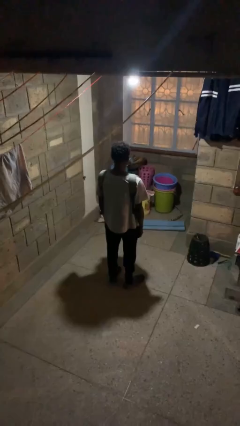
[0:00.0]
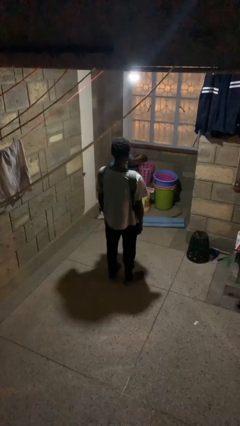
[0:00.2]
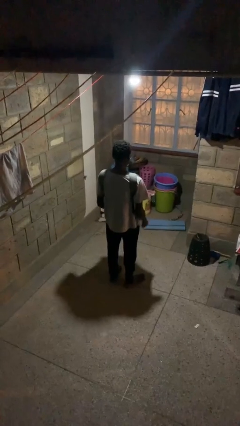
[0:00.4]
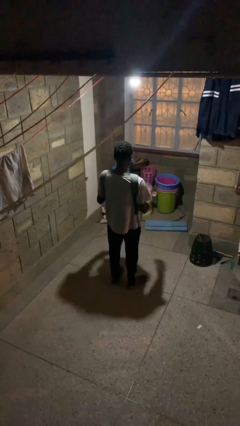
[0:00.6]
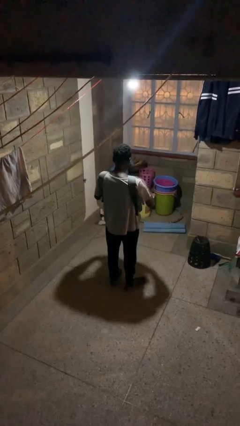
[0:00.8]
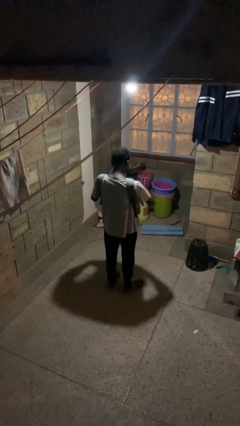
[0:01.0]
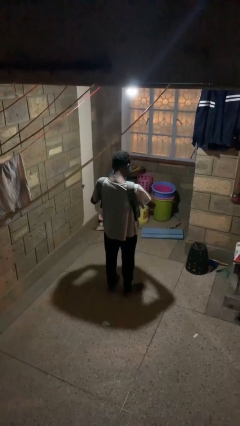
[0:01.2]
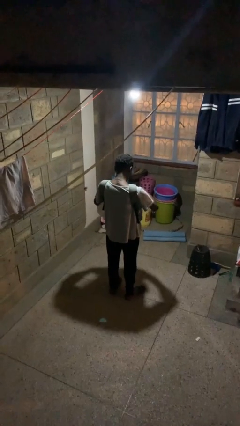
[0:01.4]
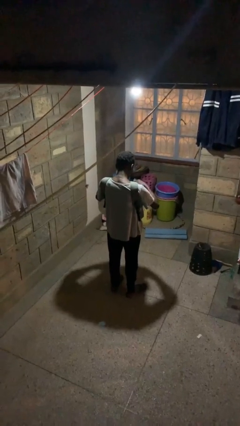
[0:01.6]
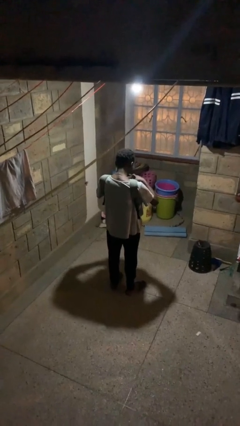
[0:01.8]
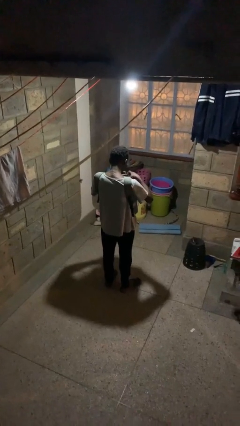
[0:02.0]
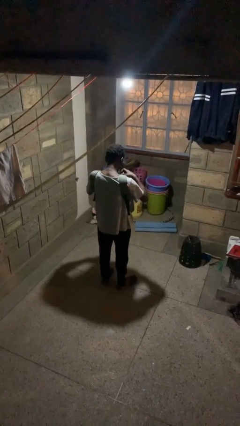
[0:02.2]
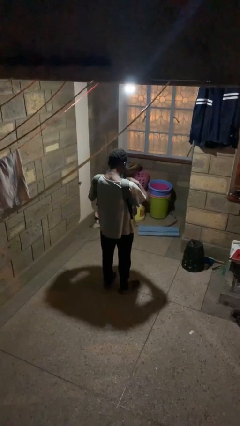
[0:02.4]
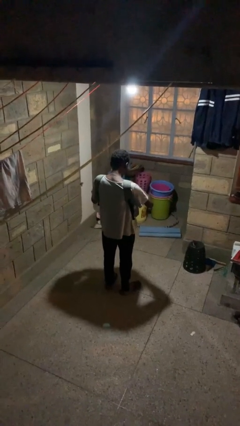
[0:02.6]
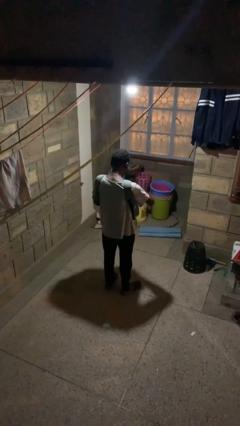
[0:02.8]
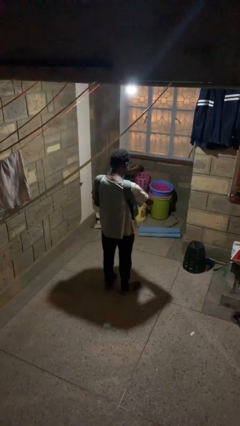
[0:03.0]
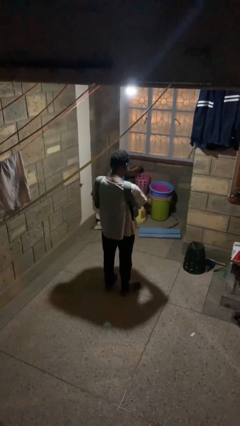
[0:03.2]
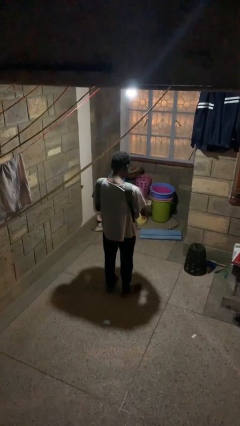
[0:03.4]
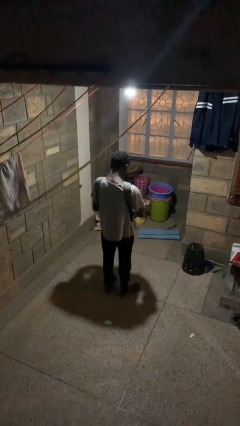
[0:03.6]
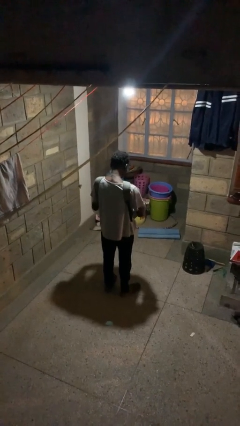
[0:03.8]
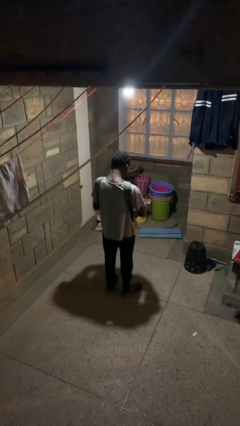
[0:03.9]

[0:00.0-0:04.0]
person searches in backpack

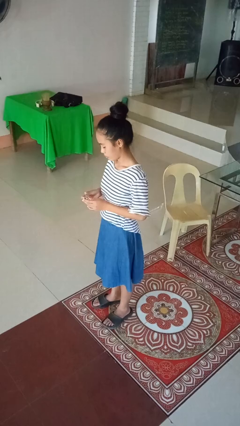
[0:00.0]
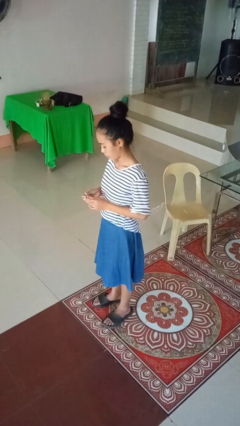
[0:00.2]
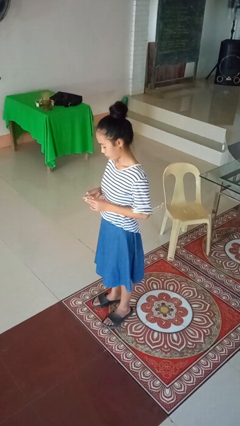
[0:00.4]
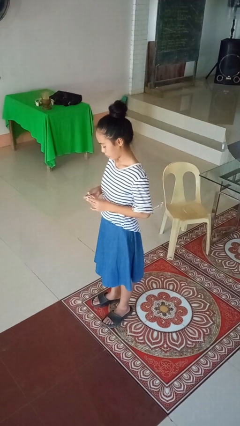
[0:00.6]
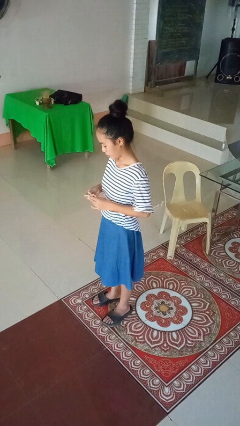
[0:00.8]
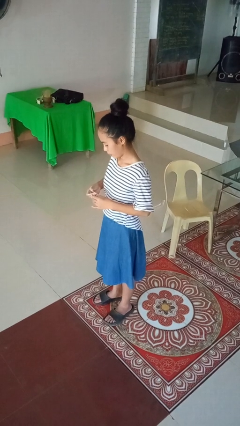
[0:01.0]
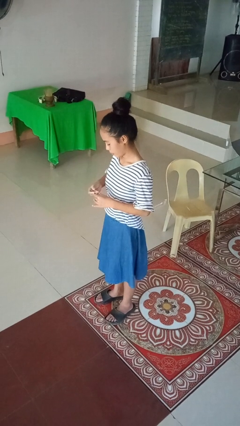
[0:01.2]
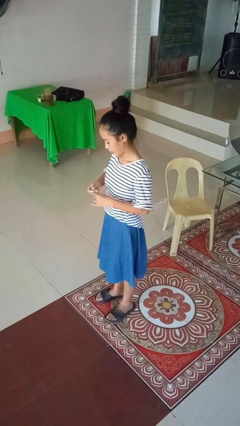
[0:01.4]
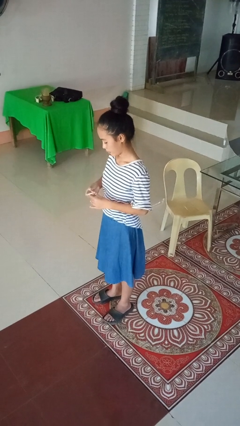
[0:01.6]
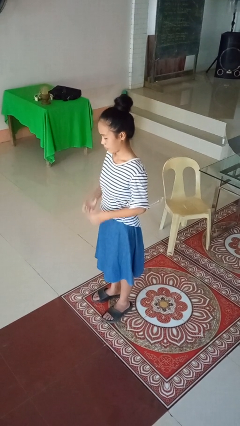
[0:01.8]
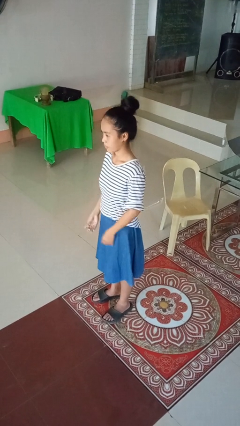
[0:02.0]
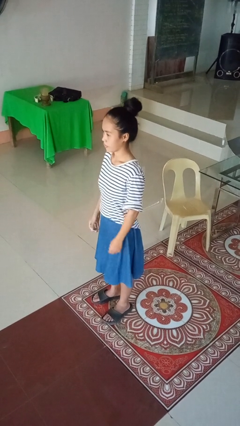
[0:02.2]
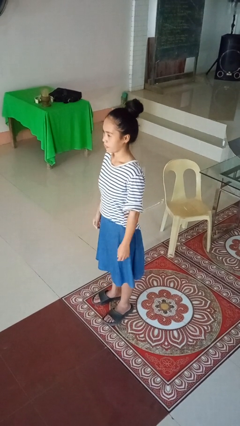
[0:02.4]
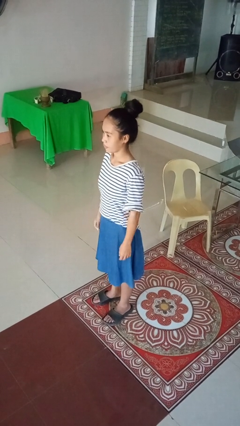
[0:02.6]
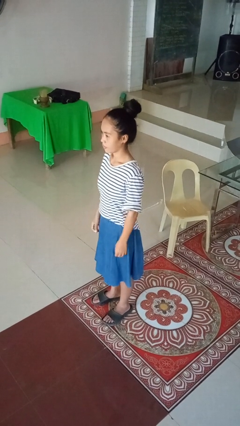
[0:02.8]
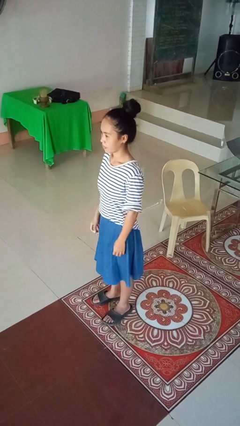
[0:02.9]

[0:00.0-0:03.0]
person clips fingernails

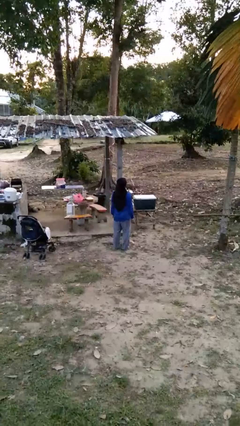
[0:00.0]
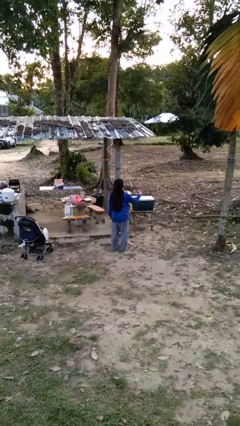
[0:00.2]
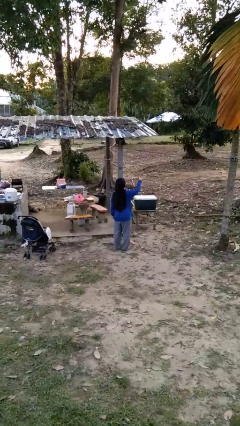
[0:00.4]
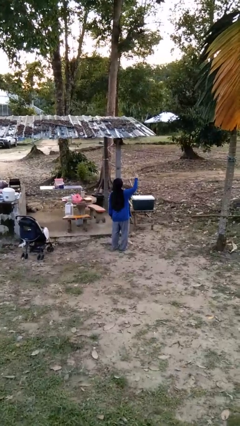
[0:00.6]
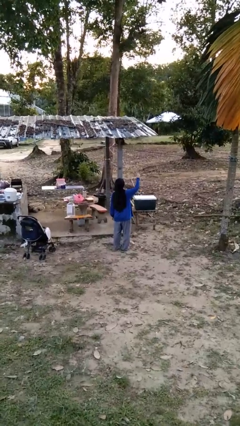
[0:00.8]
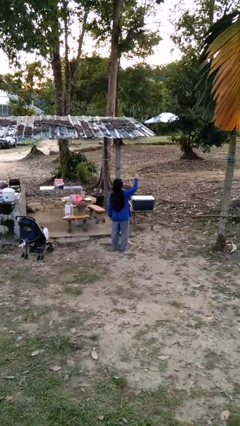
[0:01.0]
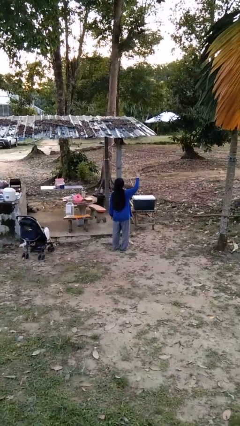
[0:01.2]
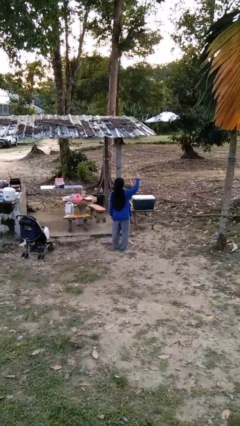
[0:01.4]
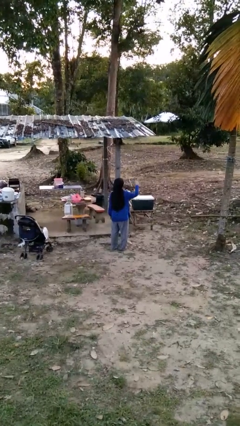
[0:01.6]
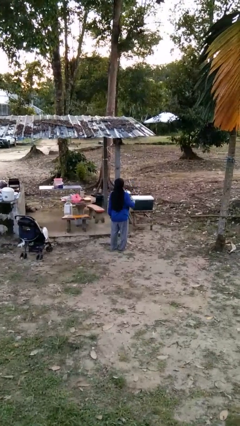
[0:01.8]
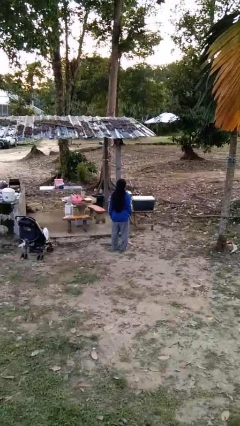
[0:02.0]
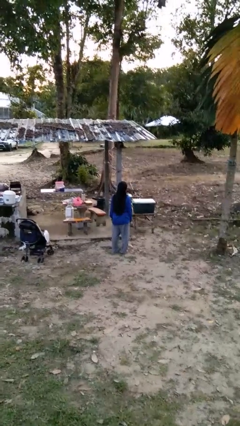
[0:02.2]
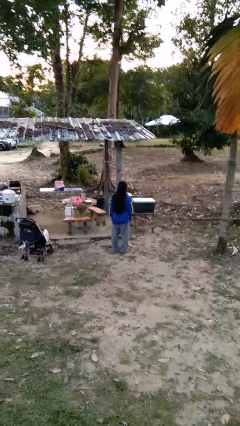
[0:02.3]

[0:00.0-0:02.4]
person gestures number three

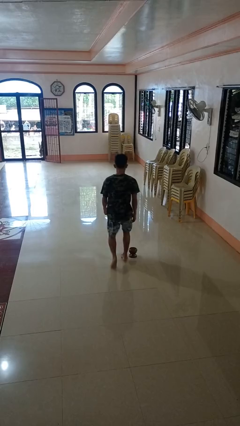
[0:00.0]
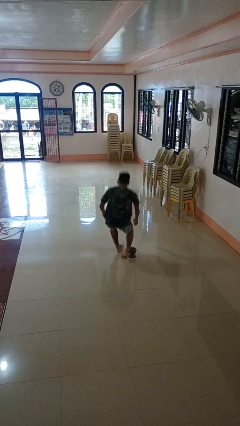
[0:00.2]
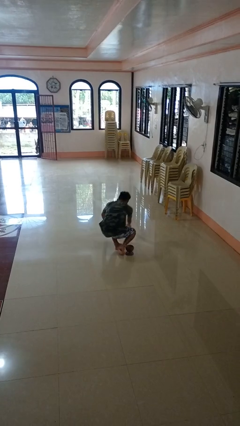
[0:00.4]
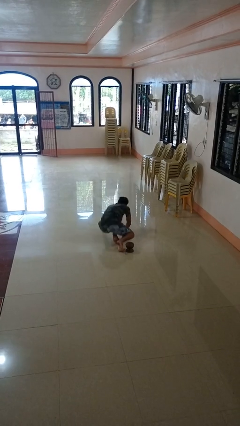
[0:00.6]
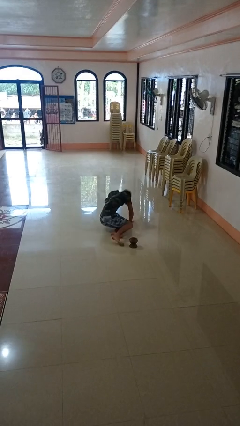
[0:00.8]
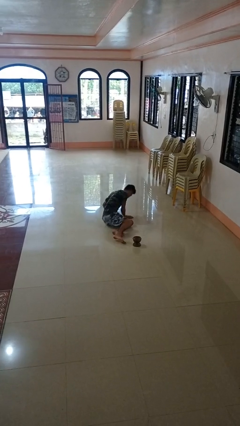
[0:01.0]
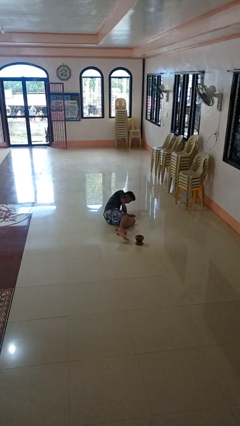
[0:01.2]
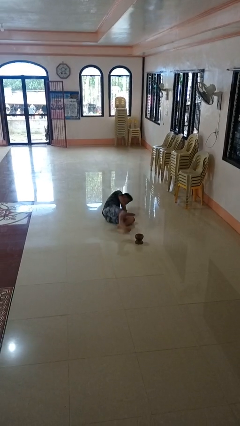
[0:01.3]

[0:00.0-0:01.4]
person trips on object on floor

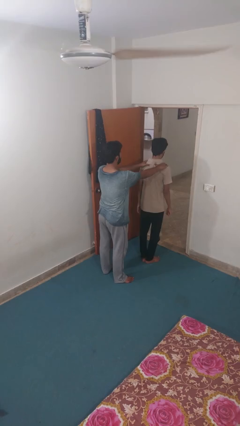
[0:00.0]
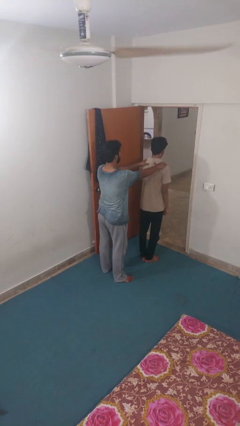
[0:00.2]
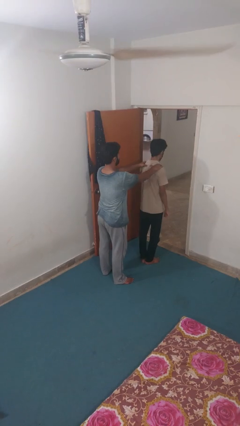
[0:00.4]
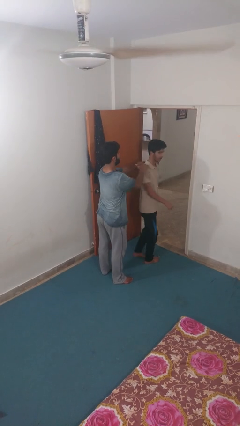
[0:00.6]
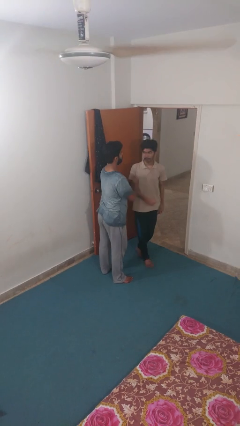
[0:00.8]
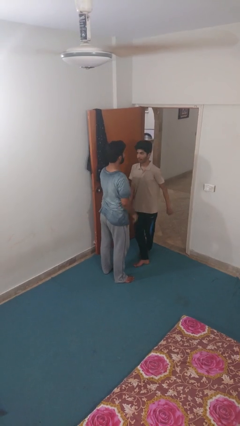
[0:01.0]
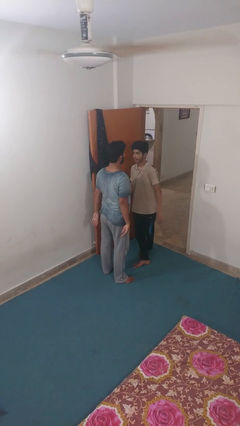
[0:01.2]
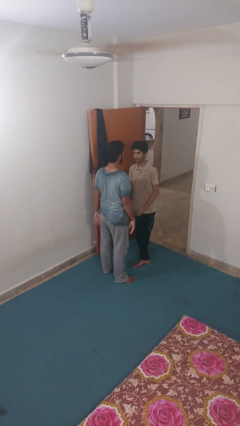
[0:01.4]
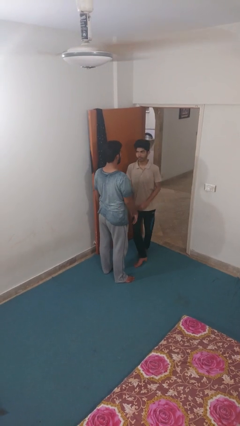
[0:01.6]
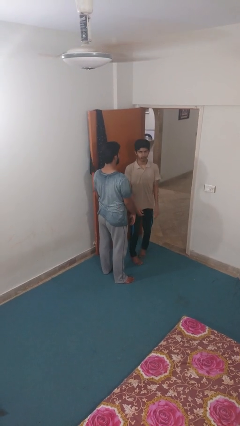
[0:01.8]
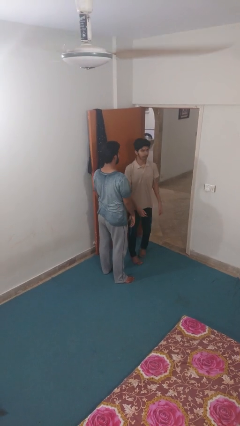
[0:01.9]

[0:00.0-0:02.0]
person spins person around

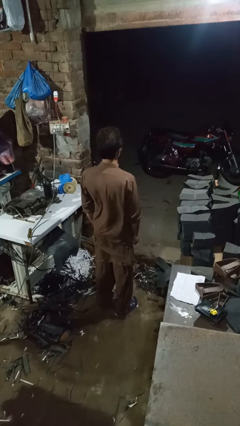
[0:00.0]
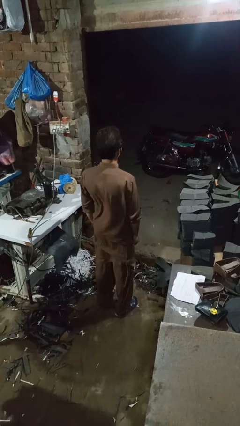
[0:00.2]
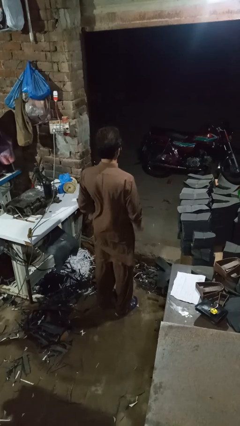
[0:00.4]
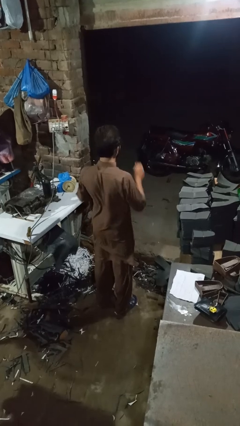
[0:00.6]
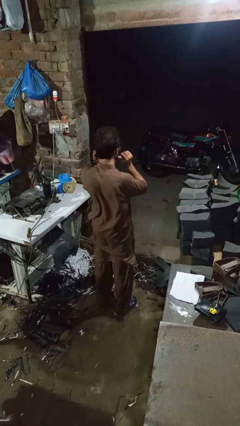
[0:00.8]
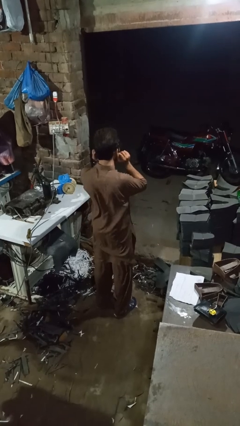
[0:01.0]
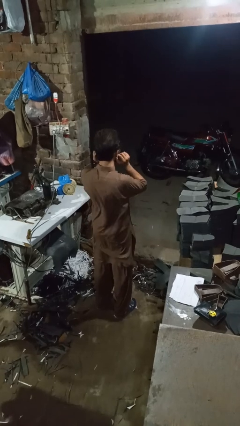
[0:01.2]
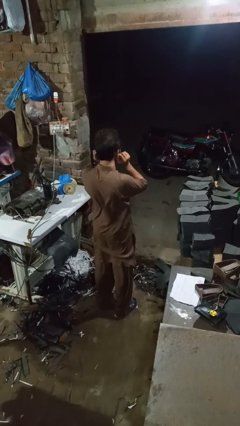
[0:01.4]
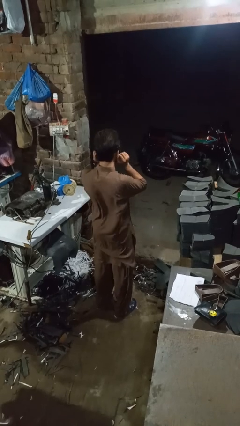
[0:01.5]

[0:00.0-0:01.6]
person touches earlobe

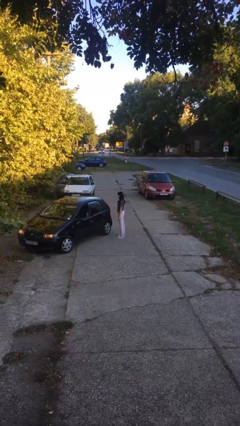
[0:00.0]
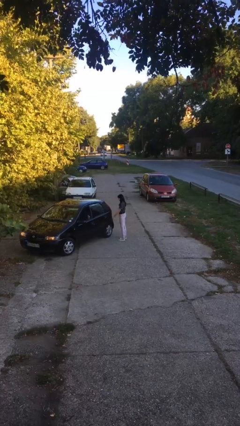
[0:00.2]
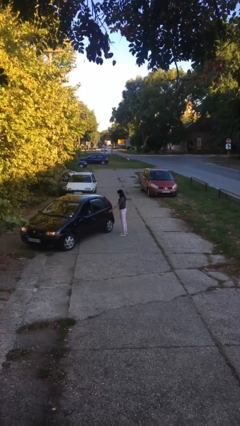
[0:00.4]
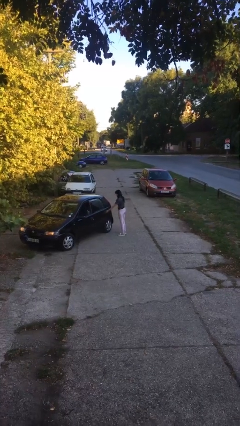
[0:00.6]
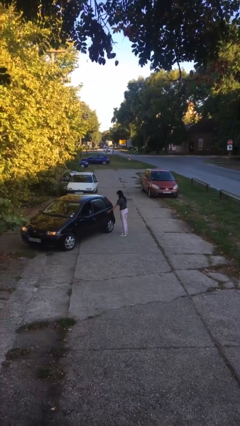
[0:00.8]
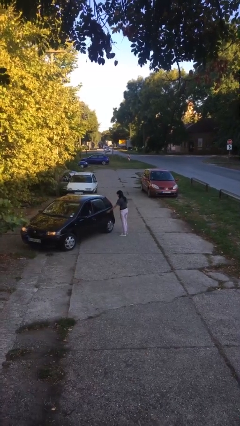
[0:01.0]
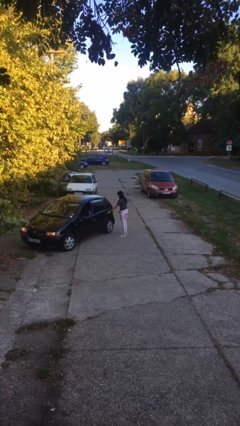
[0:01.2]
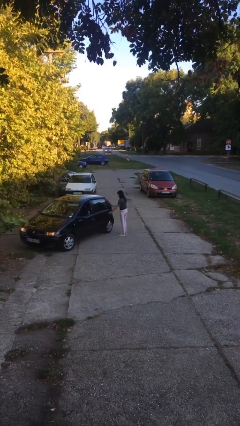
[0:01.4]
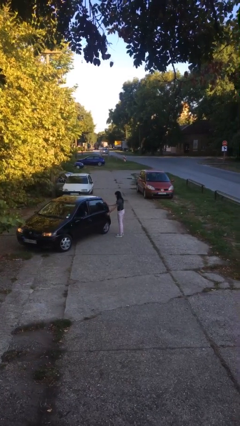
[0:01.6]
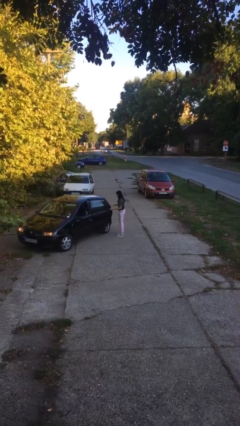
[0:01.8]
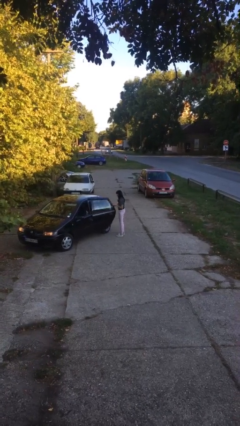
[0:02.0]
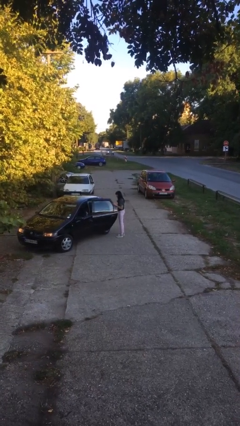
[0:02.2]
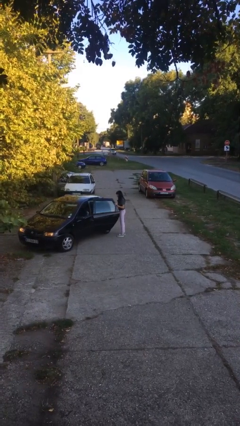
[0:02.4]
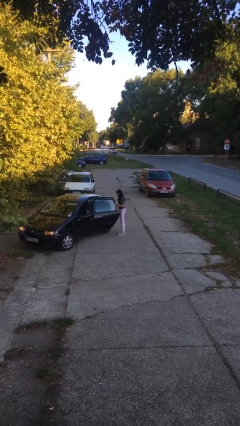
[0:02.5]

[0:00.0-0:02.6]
person opens car door

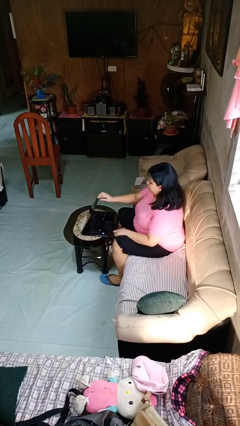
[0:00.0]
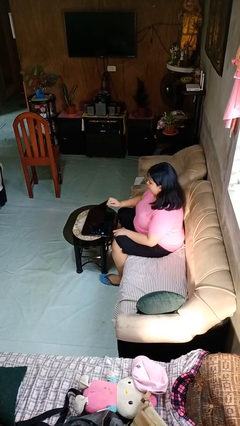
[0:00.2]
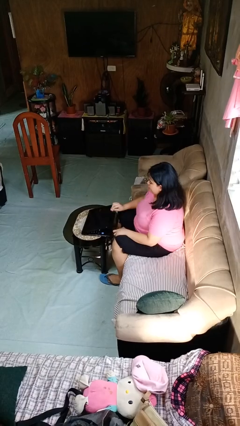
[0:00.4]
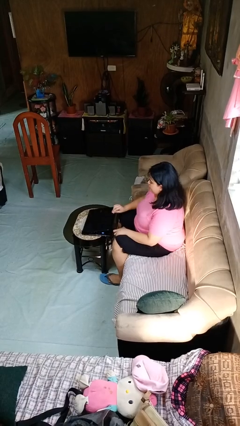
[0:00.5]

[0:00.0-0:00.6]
person closes laptop
